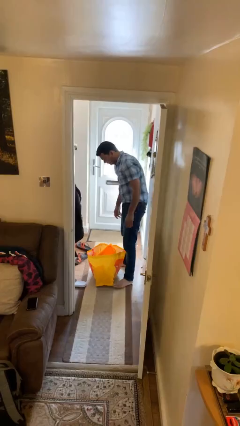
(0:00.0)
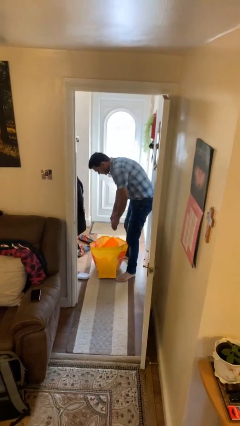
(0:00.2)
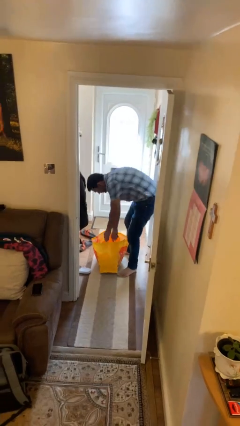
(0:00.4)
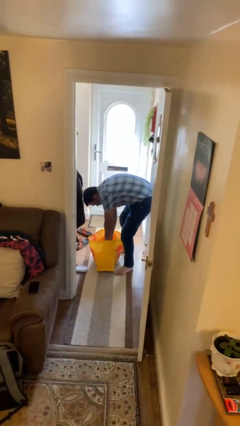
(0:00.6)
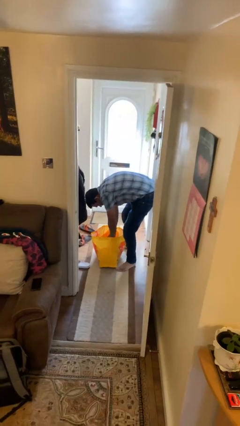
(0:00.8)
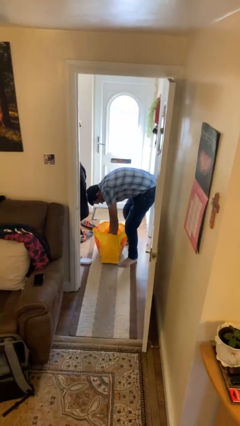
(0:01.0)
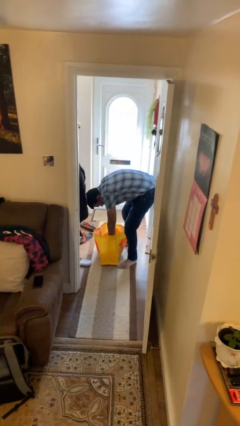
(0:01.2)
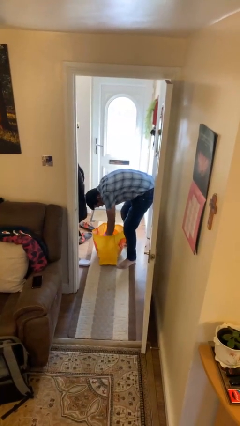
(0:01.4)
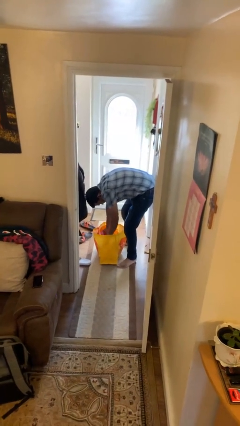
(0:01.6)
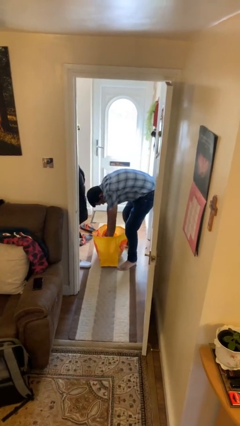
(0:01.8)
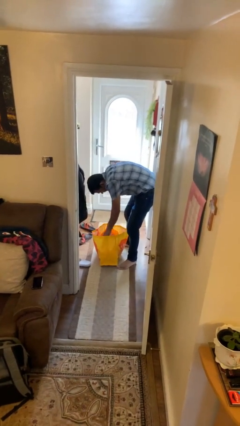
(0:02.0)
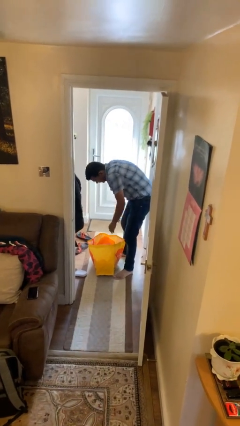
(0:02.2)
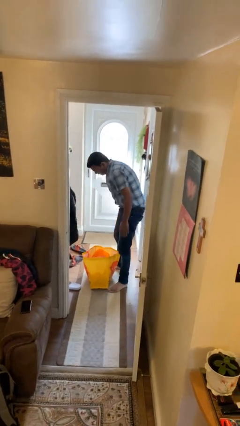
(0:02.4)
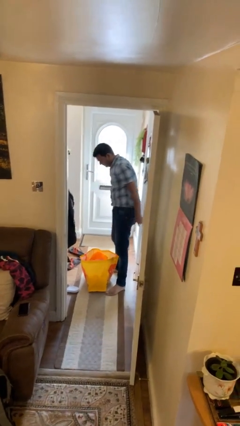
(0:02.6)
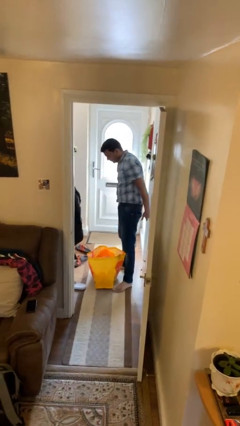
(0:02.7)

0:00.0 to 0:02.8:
person searches in bag

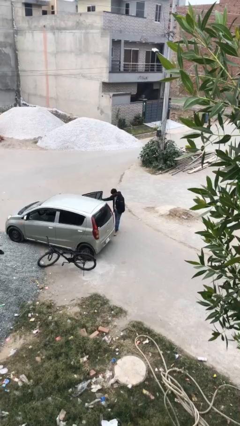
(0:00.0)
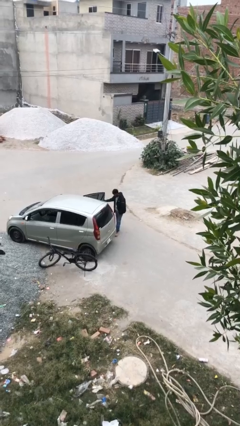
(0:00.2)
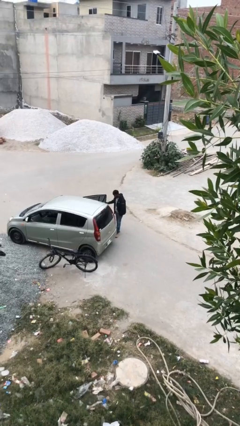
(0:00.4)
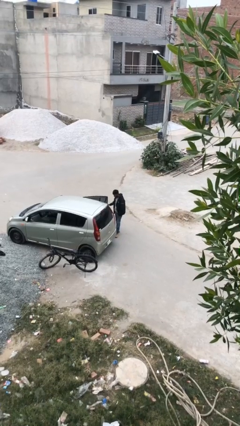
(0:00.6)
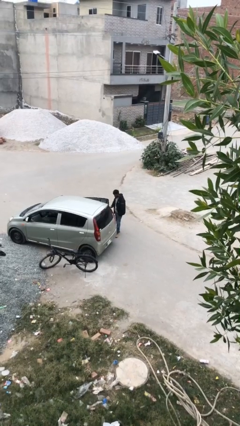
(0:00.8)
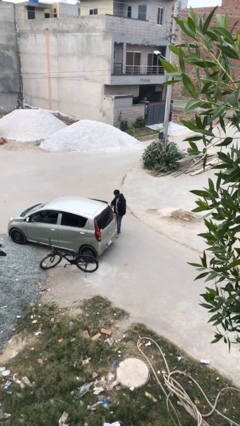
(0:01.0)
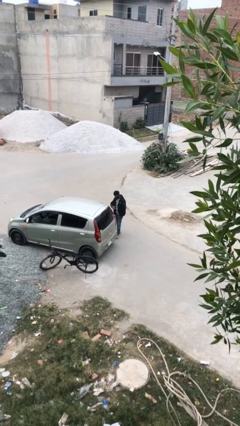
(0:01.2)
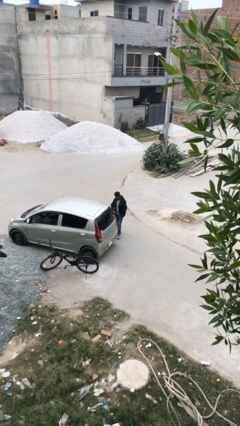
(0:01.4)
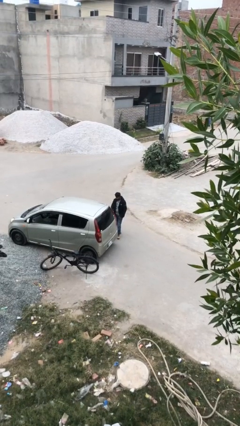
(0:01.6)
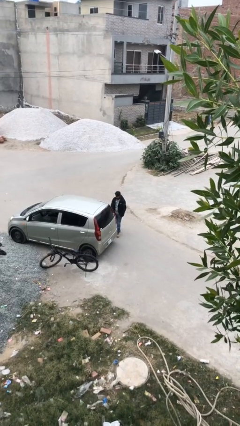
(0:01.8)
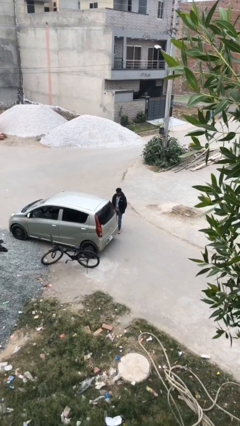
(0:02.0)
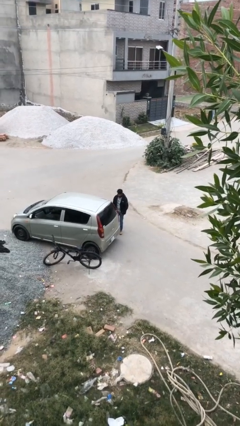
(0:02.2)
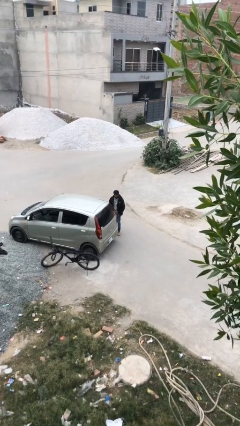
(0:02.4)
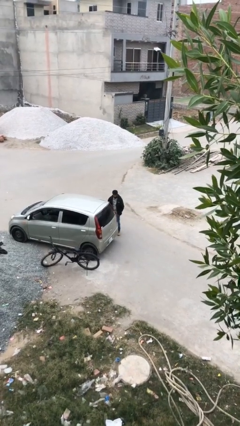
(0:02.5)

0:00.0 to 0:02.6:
person closes car door

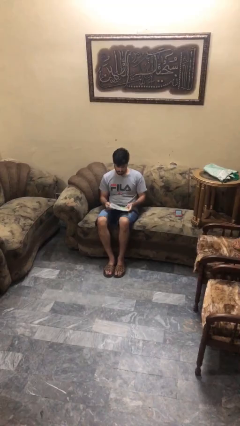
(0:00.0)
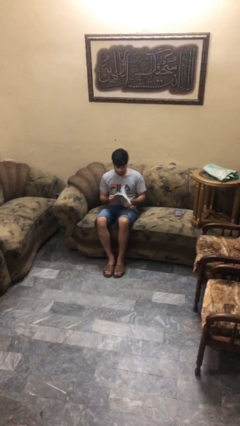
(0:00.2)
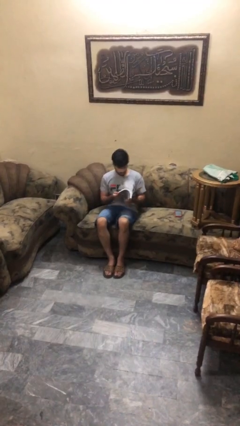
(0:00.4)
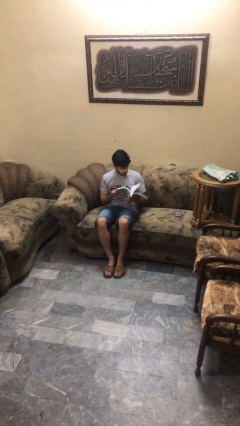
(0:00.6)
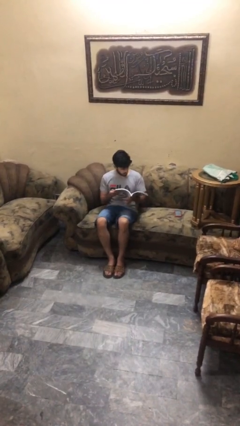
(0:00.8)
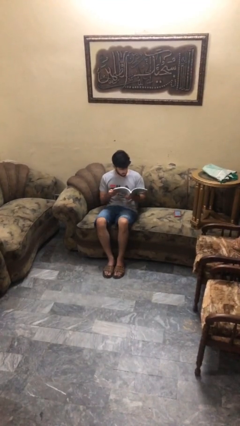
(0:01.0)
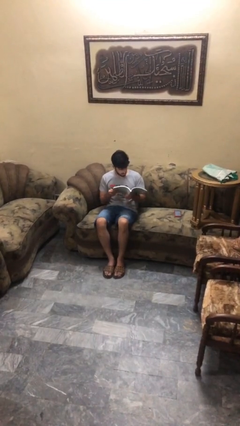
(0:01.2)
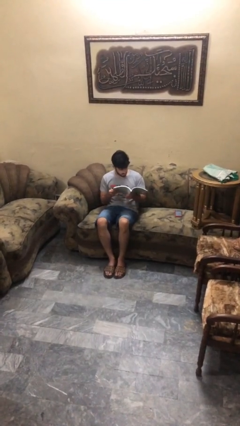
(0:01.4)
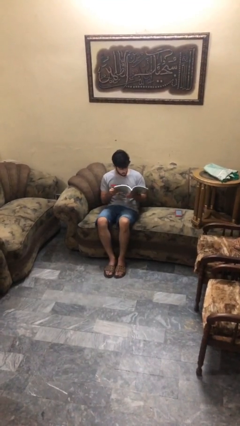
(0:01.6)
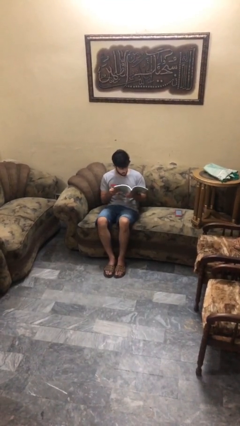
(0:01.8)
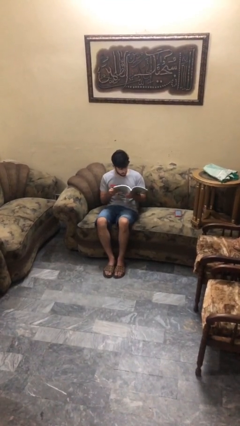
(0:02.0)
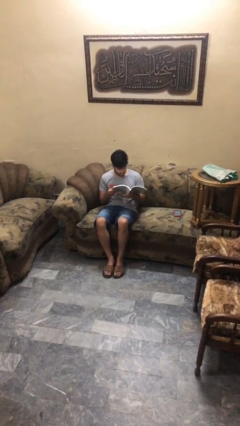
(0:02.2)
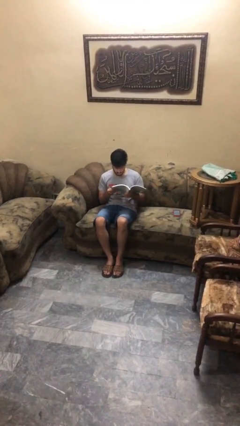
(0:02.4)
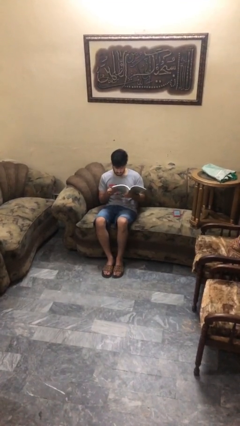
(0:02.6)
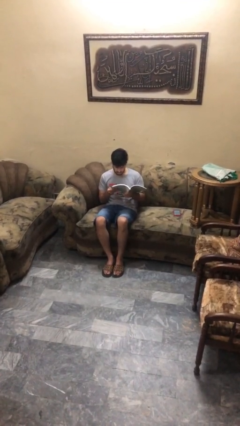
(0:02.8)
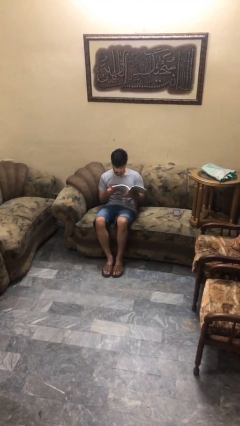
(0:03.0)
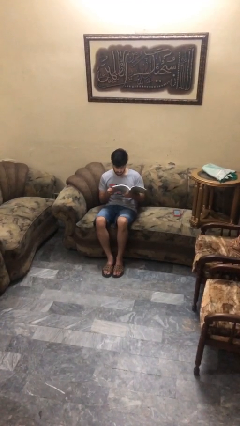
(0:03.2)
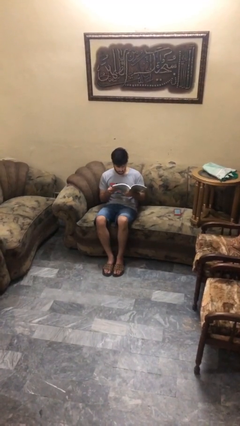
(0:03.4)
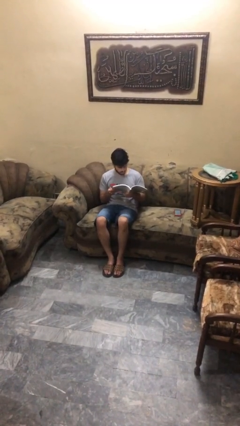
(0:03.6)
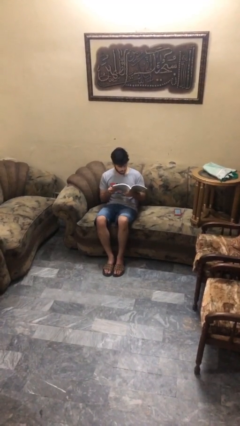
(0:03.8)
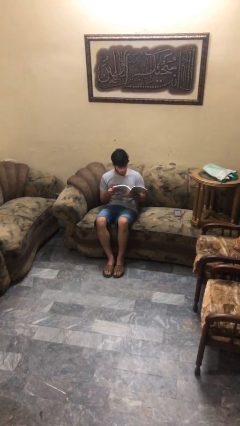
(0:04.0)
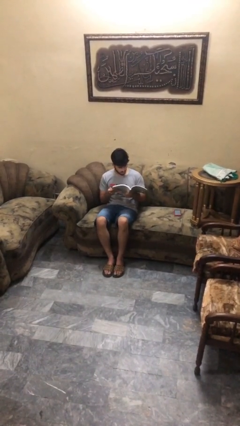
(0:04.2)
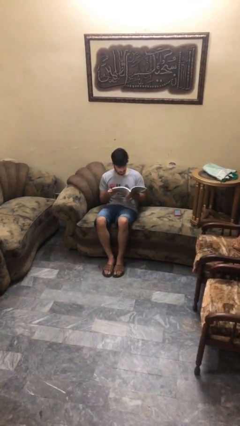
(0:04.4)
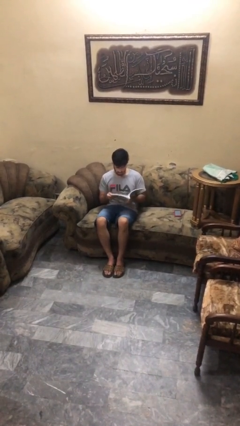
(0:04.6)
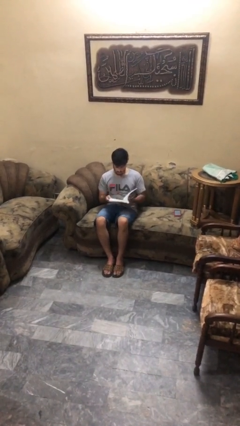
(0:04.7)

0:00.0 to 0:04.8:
person reads book

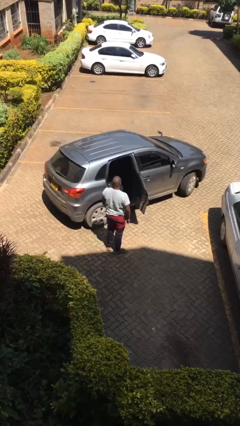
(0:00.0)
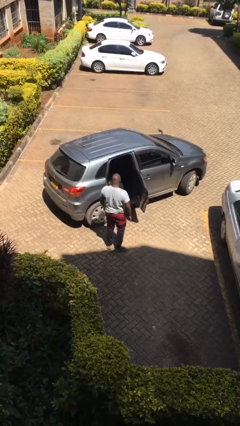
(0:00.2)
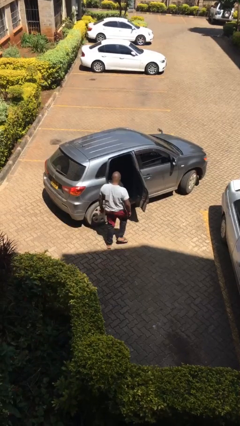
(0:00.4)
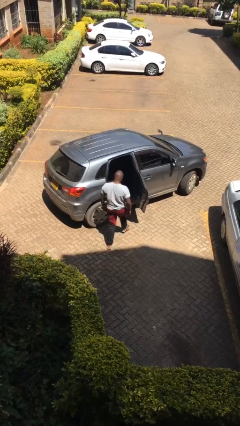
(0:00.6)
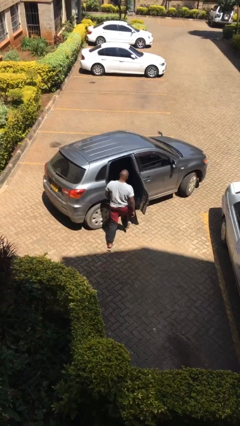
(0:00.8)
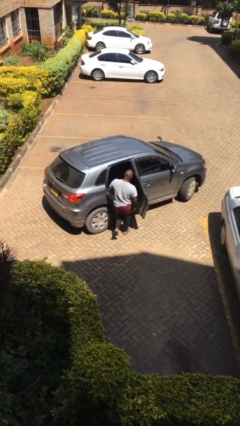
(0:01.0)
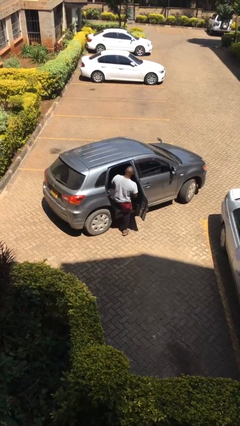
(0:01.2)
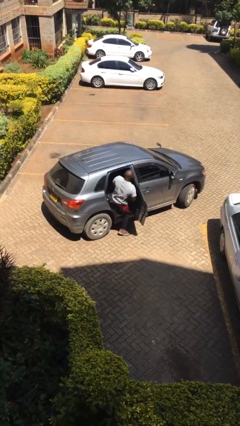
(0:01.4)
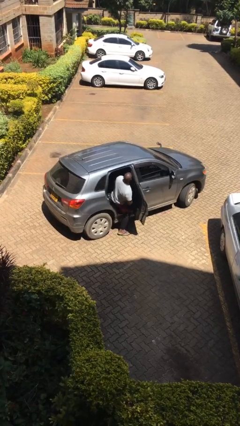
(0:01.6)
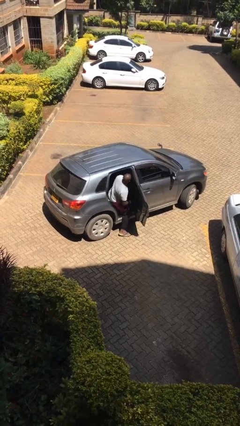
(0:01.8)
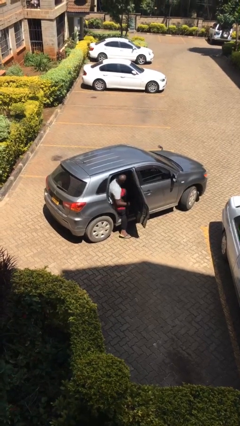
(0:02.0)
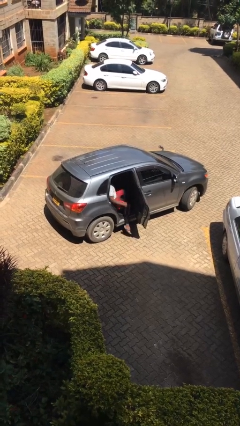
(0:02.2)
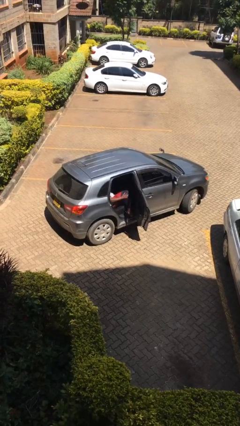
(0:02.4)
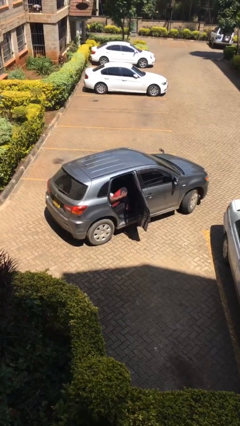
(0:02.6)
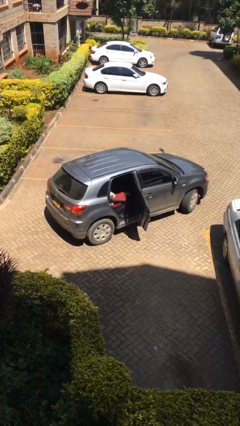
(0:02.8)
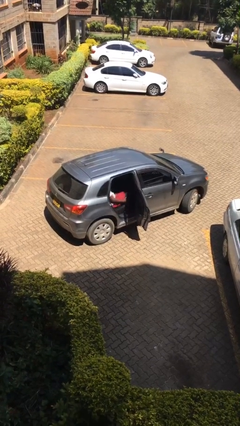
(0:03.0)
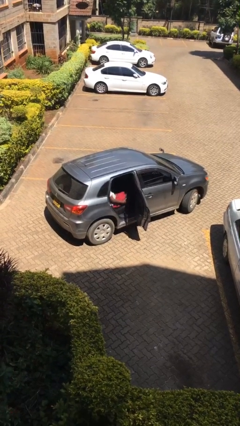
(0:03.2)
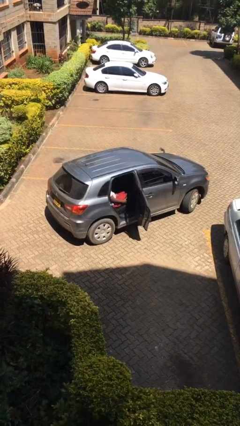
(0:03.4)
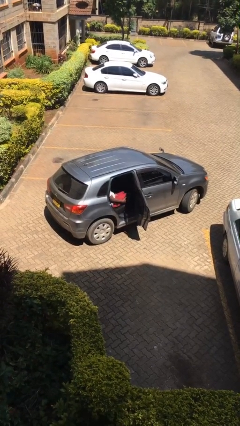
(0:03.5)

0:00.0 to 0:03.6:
person enters car

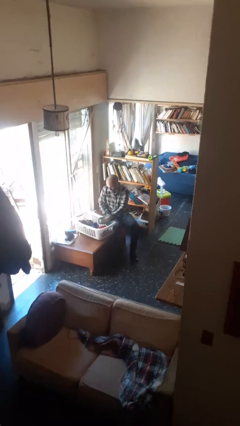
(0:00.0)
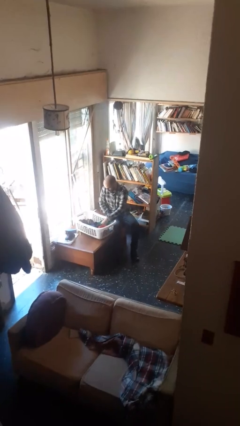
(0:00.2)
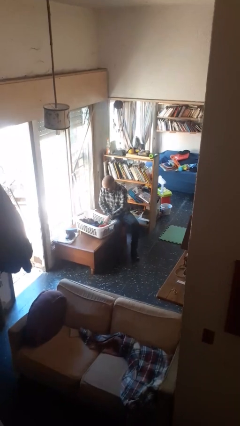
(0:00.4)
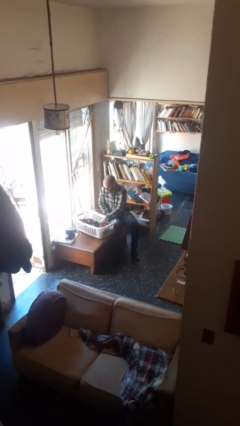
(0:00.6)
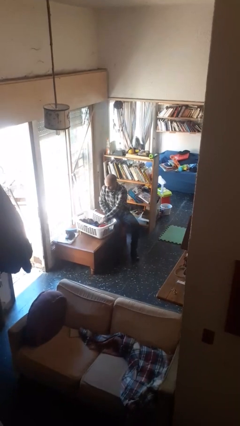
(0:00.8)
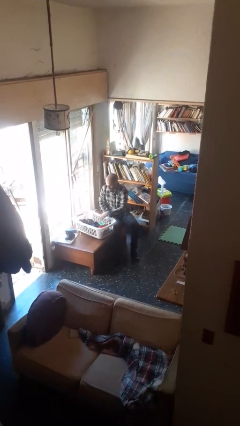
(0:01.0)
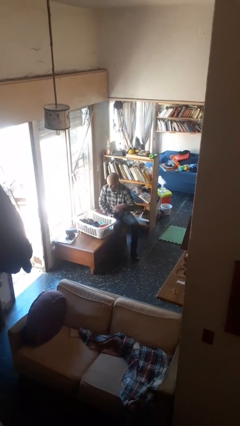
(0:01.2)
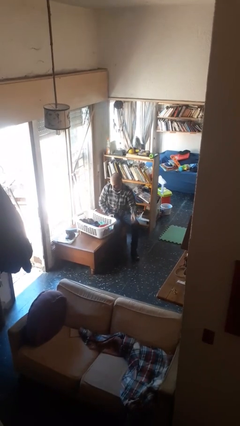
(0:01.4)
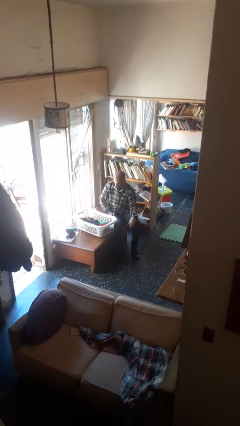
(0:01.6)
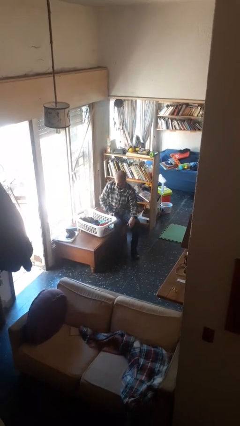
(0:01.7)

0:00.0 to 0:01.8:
person puts object into basket

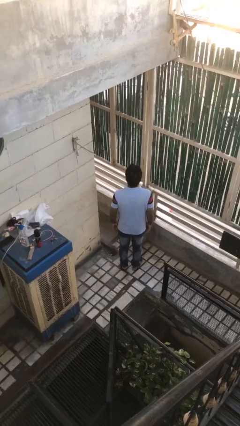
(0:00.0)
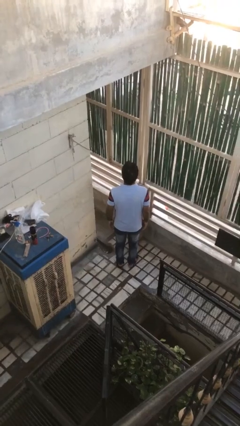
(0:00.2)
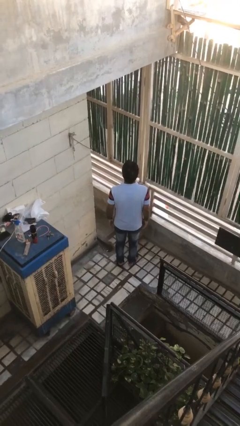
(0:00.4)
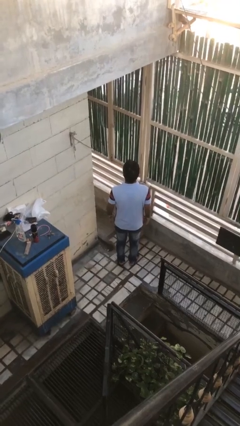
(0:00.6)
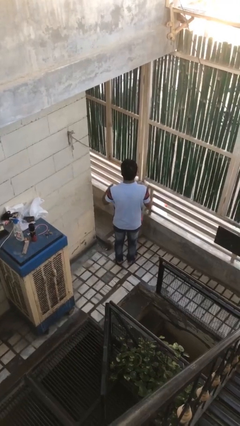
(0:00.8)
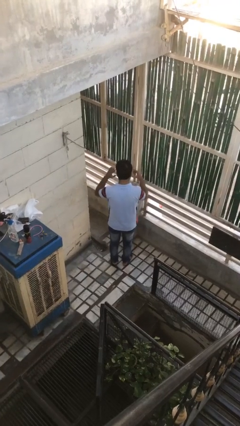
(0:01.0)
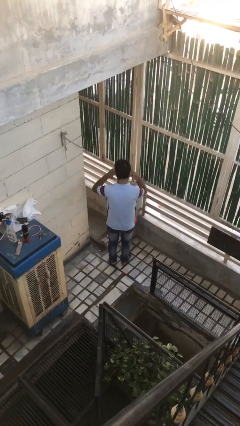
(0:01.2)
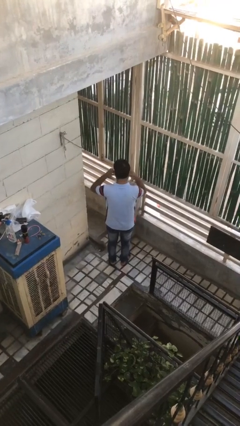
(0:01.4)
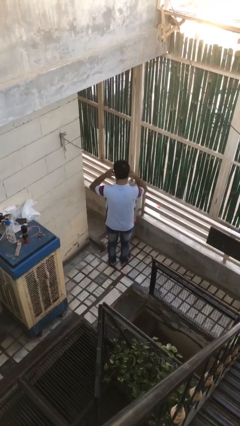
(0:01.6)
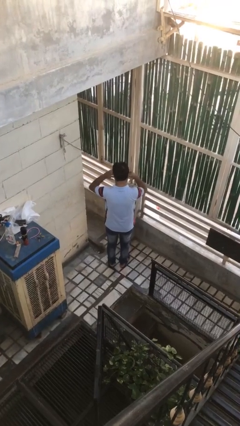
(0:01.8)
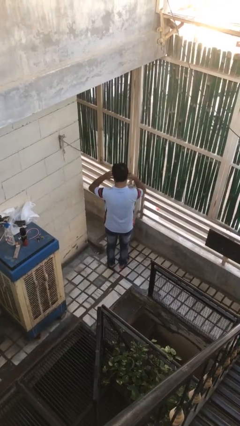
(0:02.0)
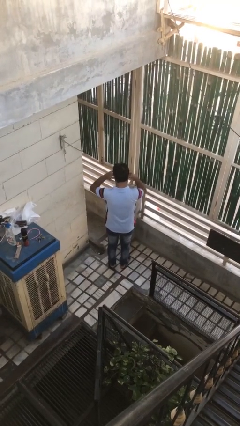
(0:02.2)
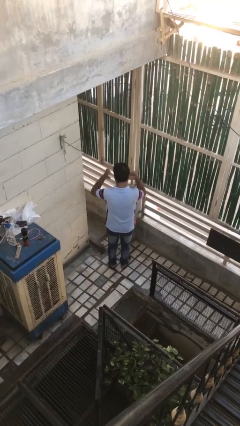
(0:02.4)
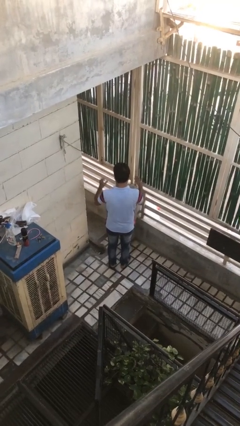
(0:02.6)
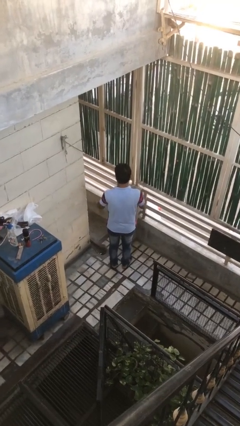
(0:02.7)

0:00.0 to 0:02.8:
person puts fingers in ear
